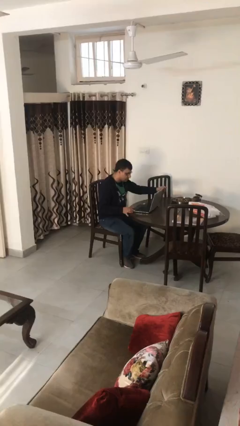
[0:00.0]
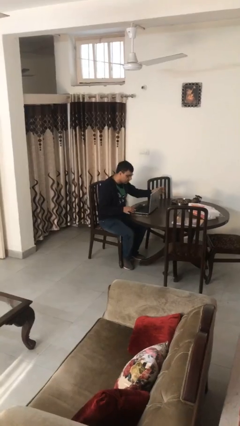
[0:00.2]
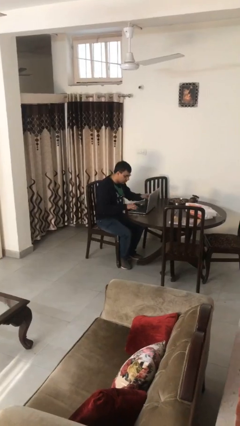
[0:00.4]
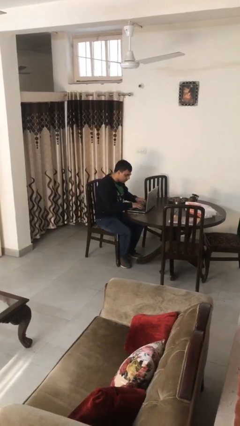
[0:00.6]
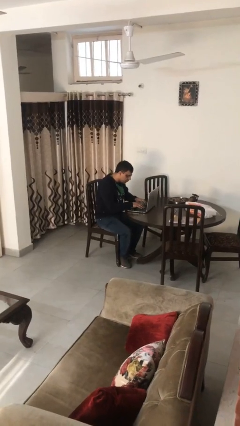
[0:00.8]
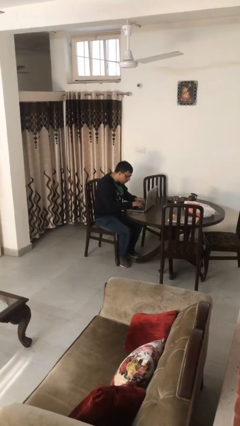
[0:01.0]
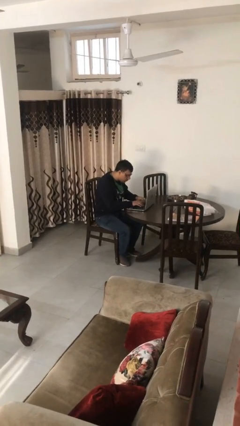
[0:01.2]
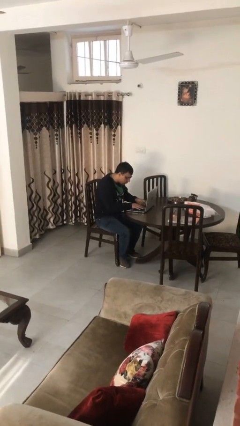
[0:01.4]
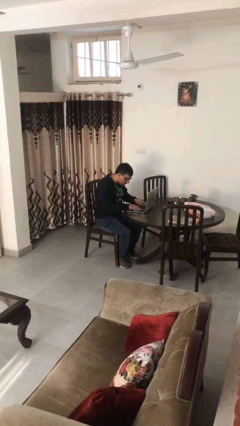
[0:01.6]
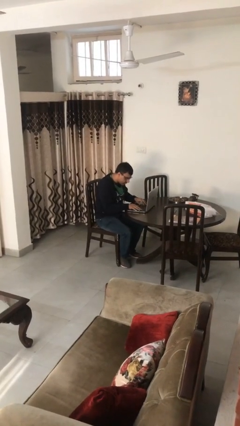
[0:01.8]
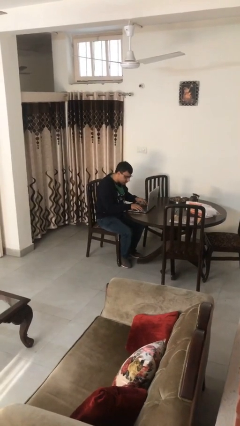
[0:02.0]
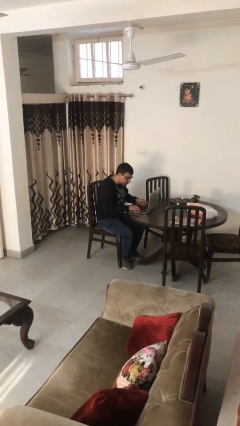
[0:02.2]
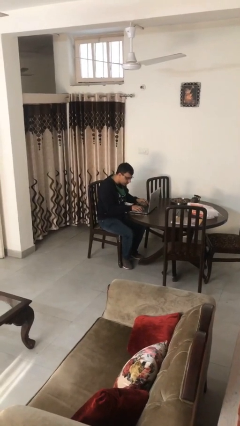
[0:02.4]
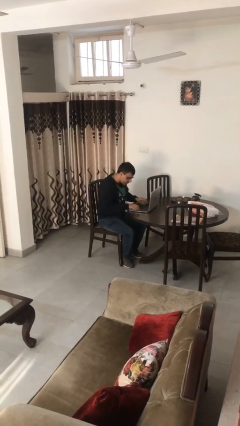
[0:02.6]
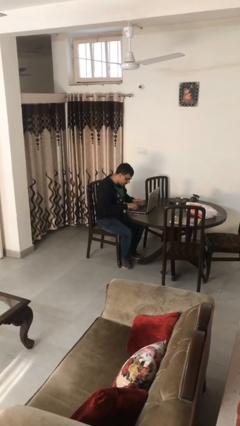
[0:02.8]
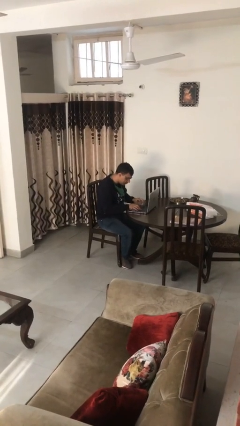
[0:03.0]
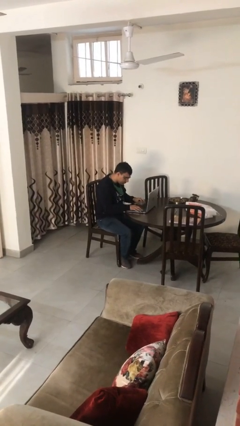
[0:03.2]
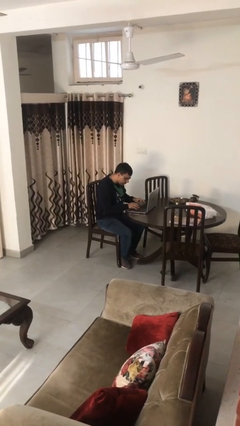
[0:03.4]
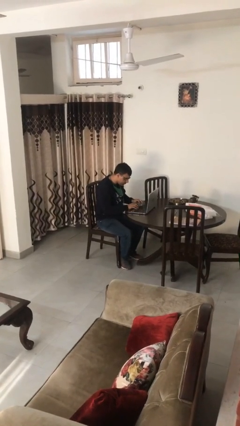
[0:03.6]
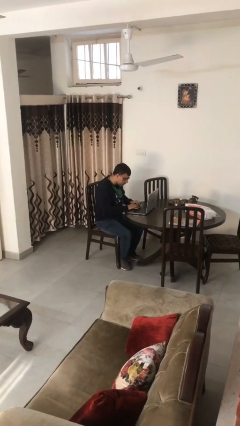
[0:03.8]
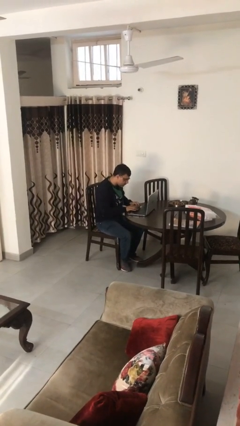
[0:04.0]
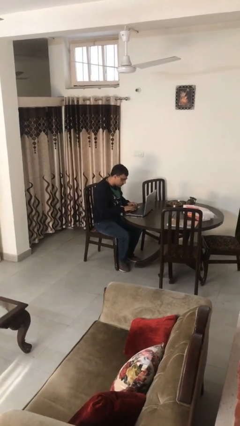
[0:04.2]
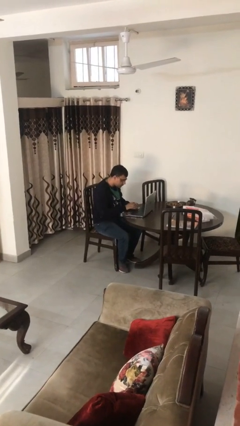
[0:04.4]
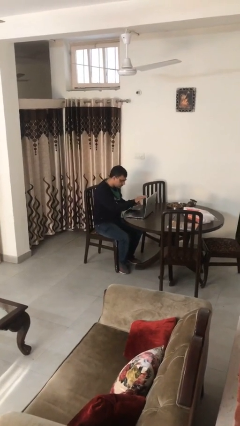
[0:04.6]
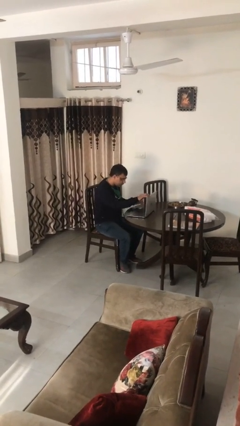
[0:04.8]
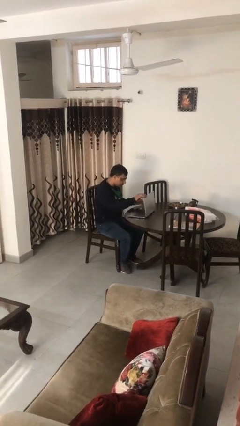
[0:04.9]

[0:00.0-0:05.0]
person interacts with laptop

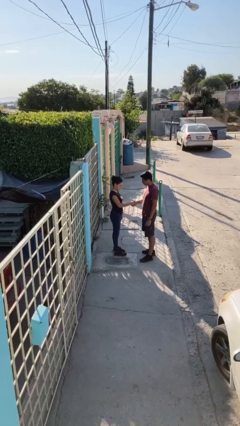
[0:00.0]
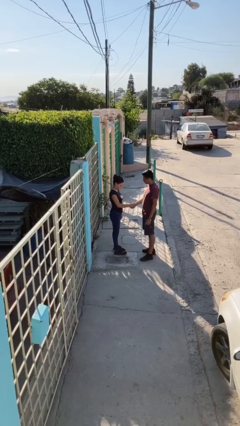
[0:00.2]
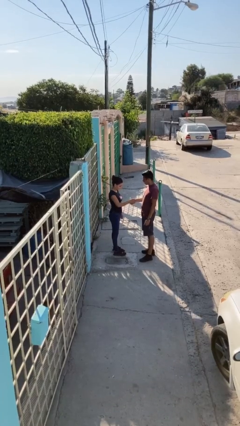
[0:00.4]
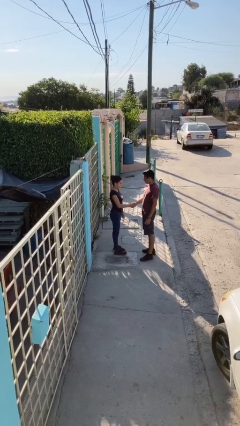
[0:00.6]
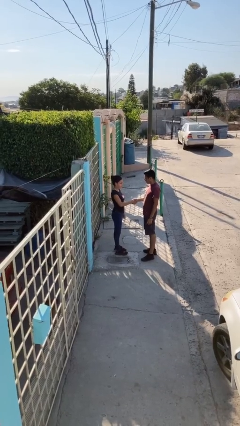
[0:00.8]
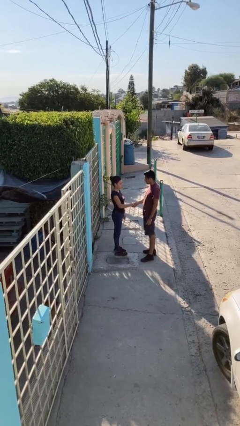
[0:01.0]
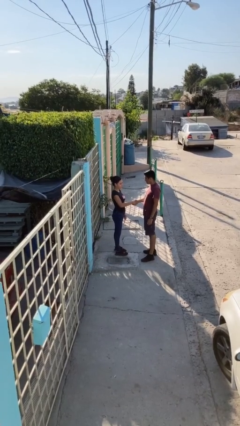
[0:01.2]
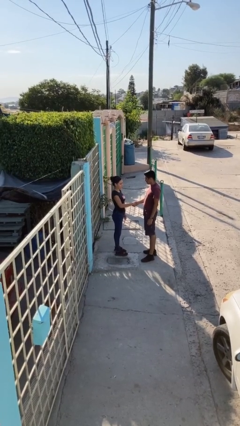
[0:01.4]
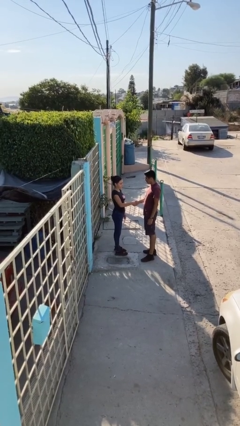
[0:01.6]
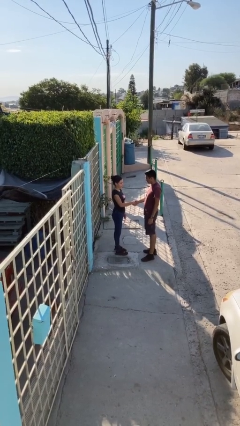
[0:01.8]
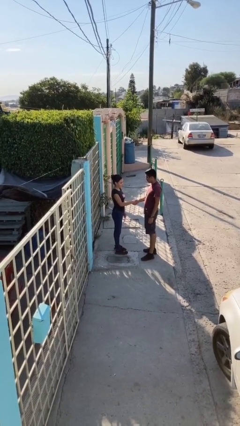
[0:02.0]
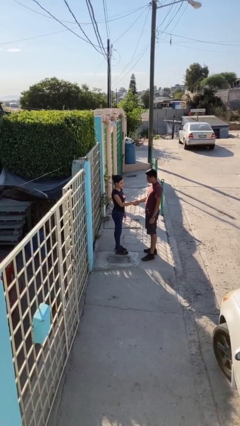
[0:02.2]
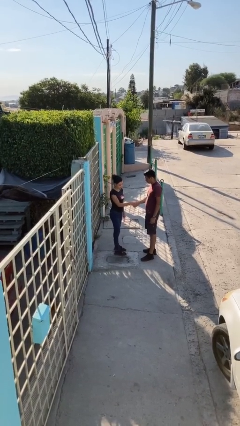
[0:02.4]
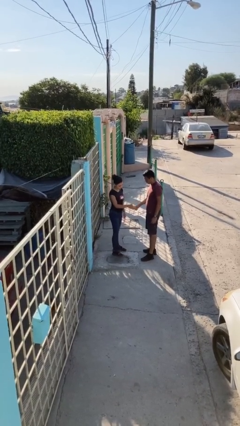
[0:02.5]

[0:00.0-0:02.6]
person shakes hand

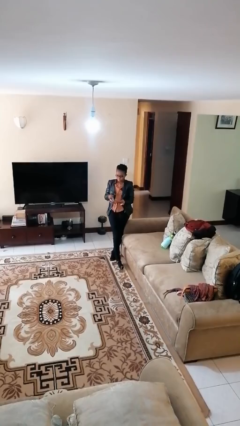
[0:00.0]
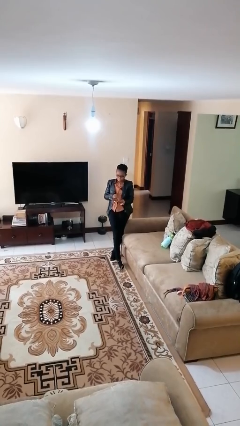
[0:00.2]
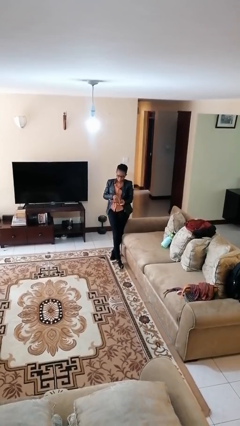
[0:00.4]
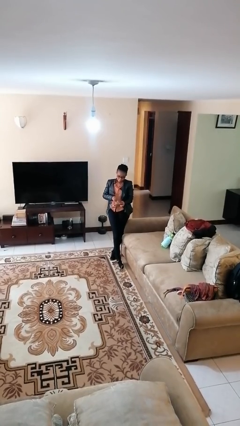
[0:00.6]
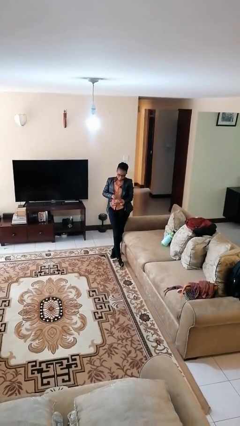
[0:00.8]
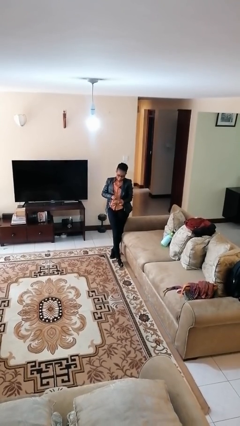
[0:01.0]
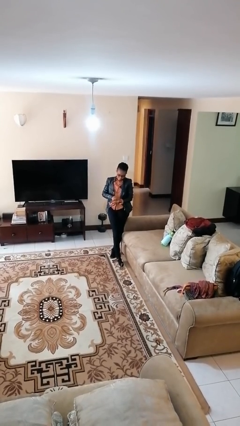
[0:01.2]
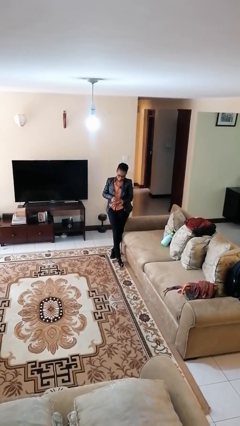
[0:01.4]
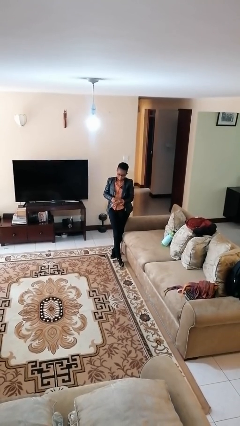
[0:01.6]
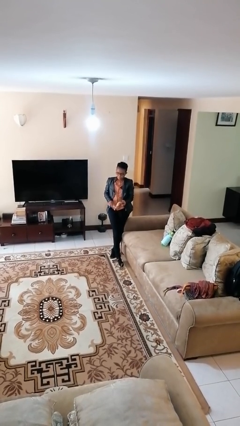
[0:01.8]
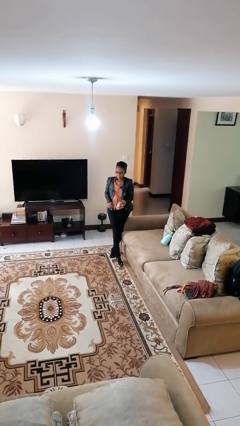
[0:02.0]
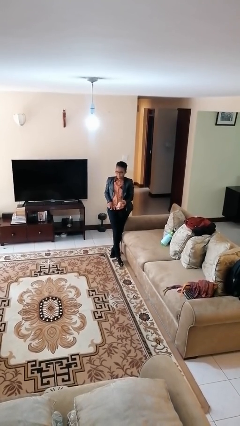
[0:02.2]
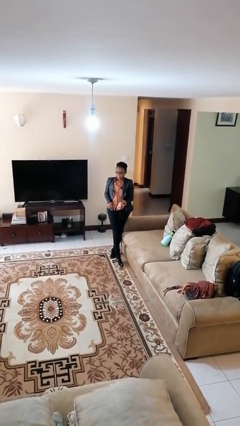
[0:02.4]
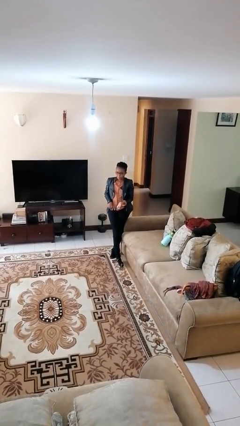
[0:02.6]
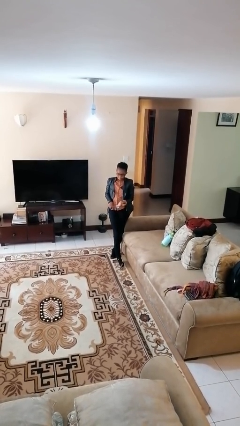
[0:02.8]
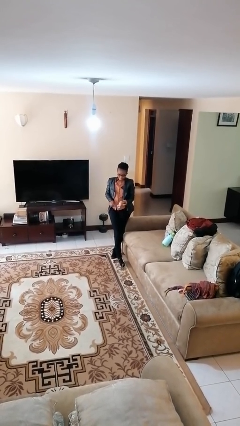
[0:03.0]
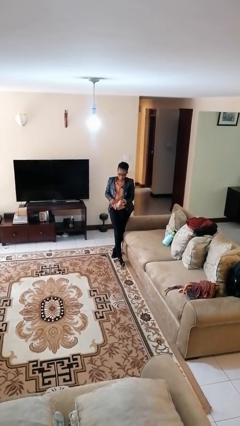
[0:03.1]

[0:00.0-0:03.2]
person puts on wristwatch

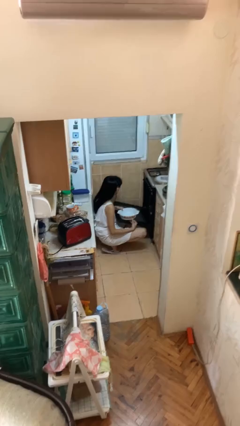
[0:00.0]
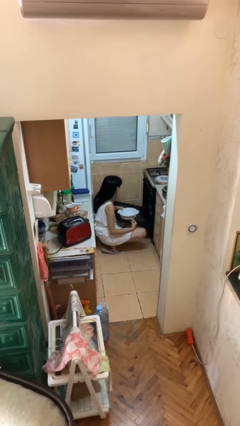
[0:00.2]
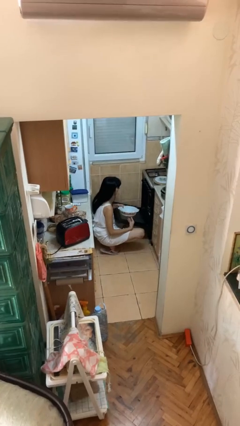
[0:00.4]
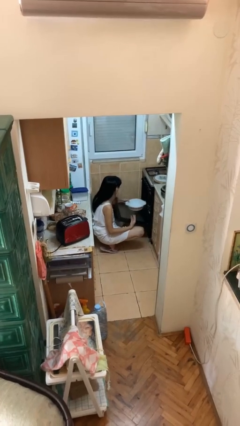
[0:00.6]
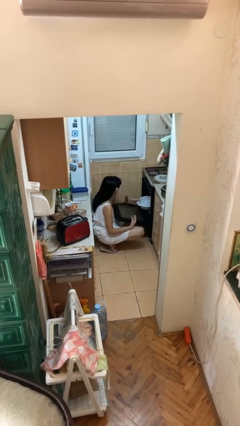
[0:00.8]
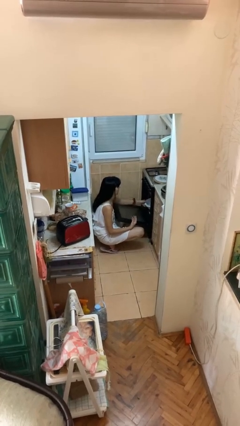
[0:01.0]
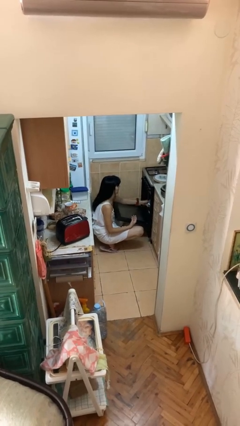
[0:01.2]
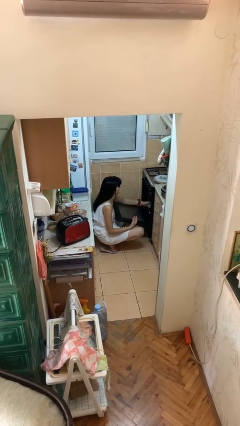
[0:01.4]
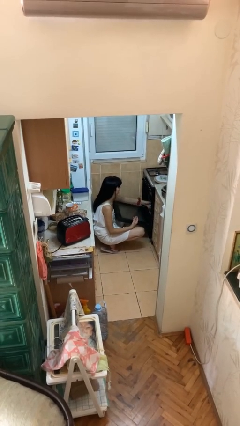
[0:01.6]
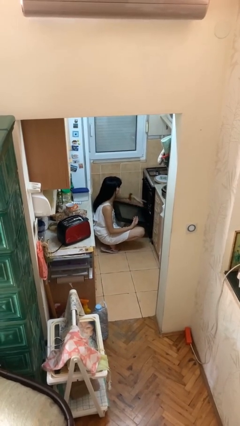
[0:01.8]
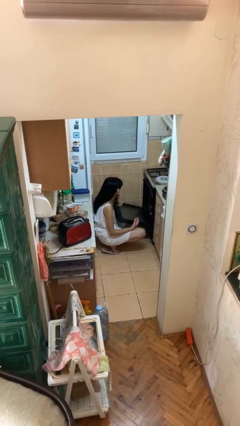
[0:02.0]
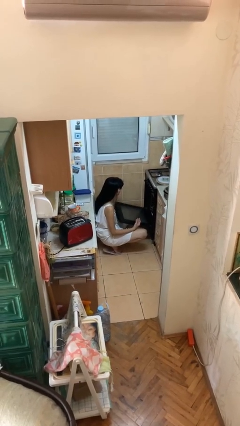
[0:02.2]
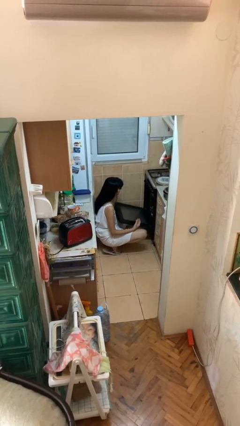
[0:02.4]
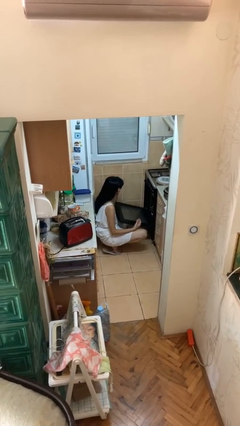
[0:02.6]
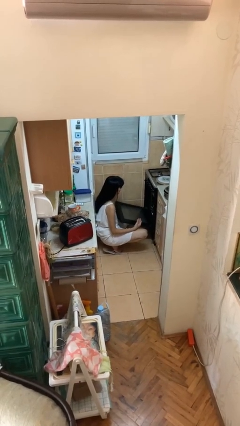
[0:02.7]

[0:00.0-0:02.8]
person puts object into oven

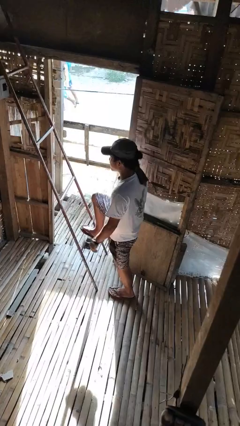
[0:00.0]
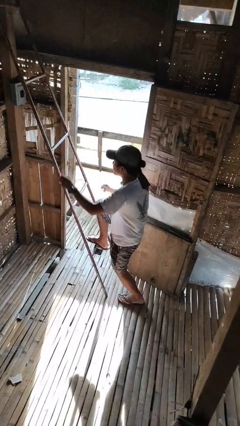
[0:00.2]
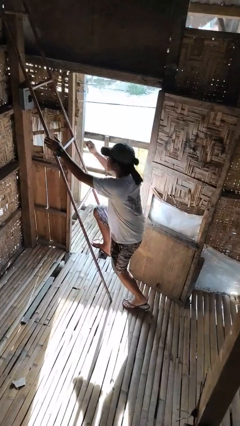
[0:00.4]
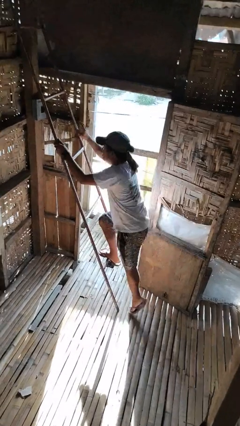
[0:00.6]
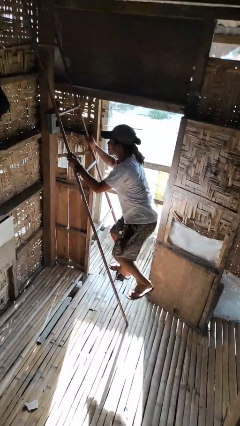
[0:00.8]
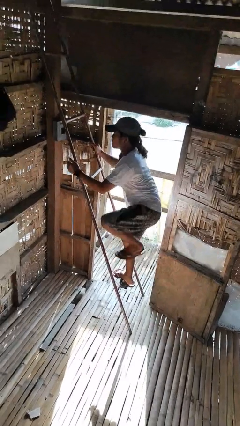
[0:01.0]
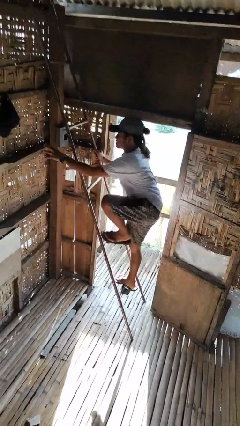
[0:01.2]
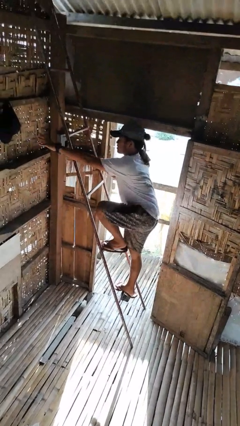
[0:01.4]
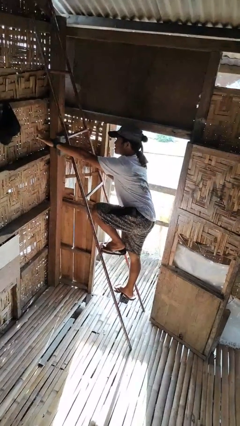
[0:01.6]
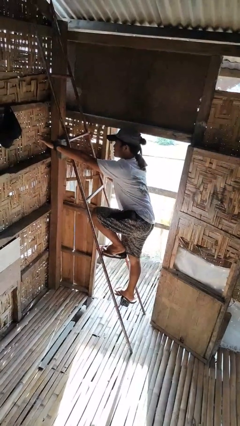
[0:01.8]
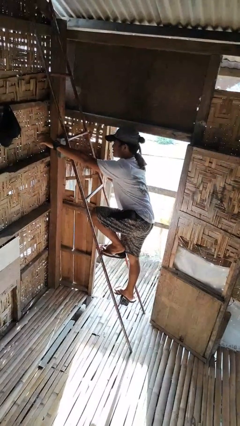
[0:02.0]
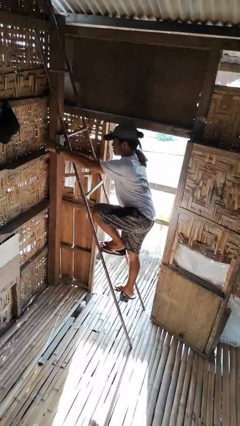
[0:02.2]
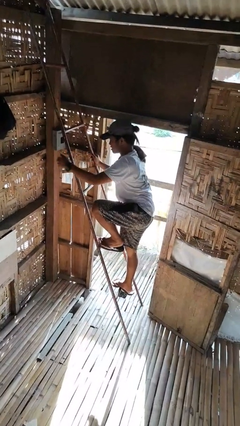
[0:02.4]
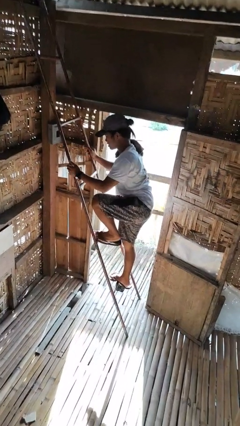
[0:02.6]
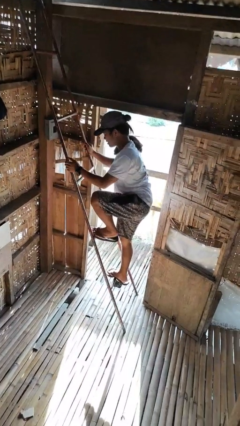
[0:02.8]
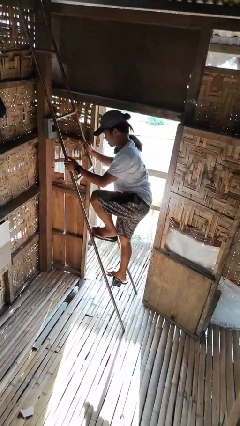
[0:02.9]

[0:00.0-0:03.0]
person climbs up ladder

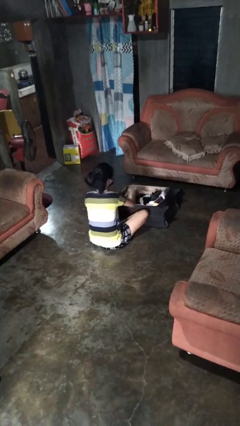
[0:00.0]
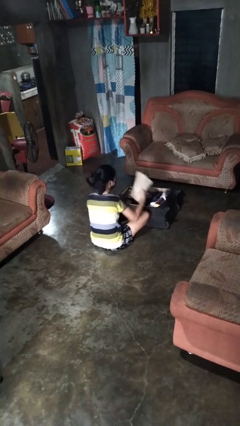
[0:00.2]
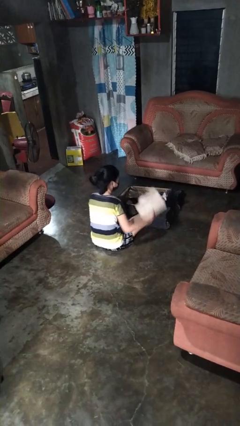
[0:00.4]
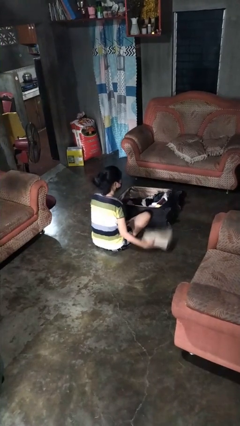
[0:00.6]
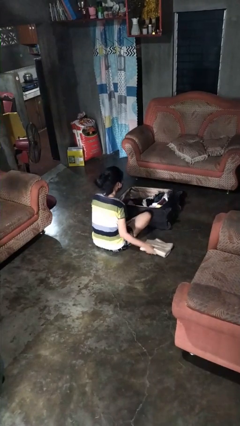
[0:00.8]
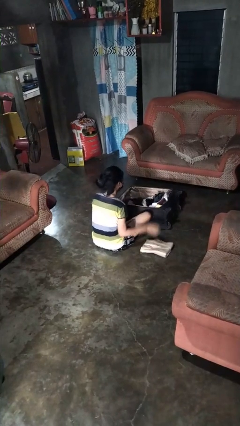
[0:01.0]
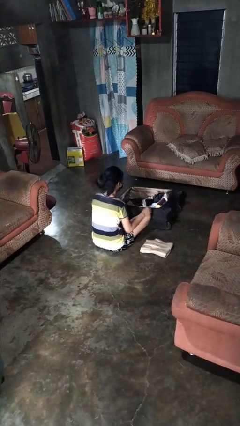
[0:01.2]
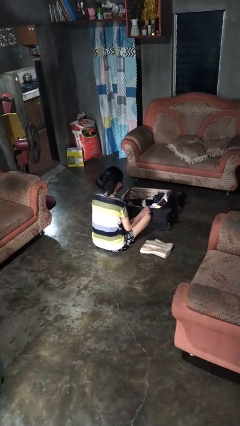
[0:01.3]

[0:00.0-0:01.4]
person unloads clothes from suitcase
